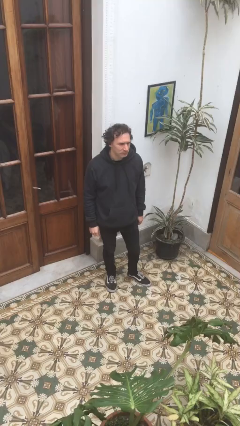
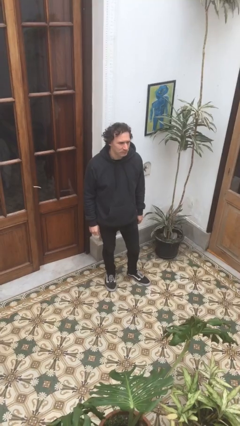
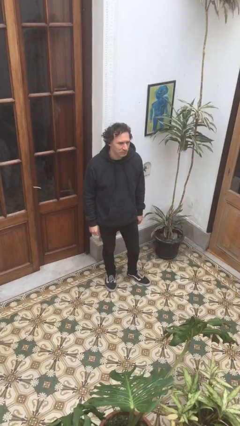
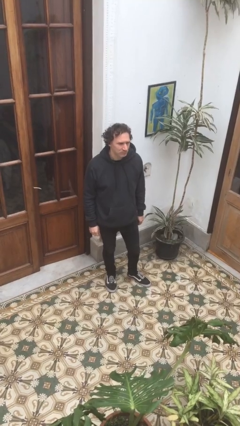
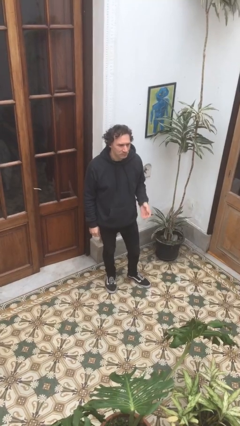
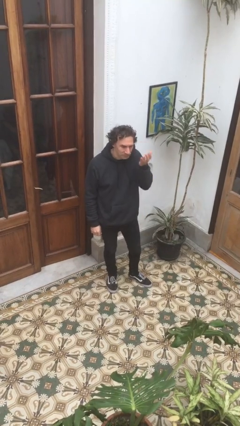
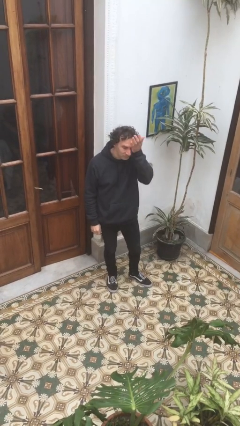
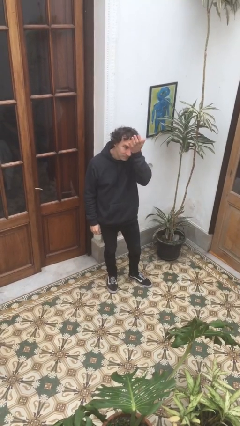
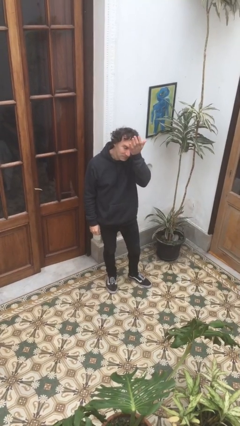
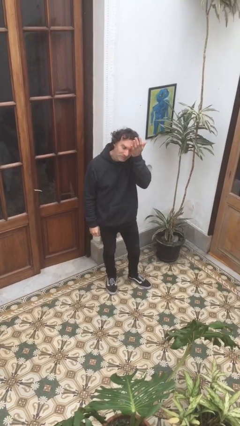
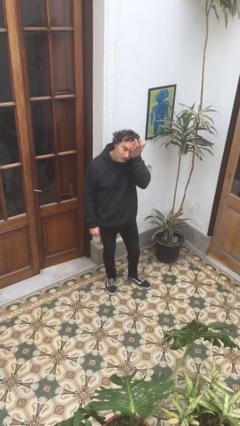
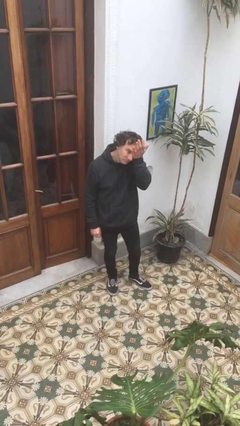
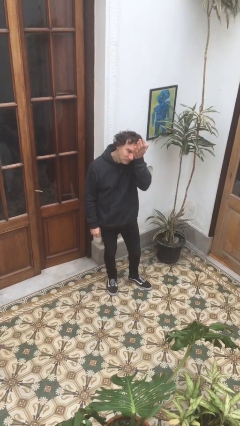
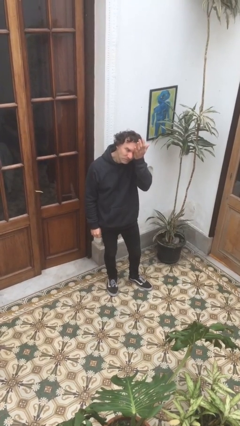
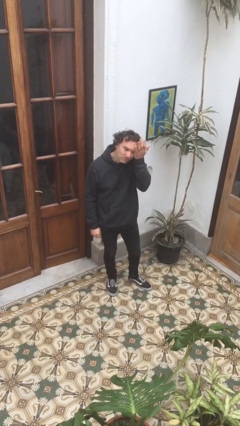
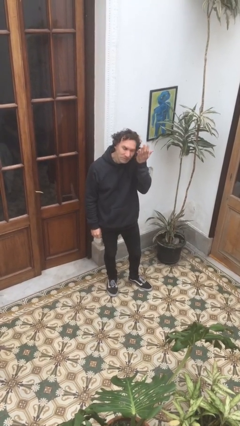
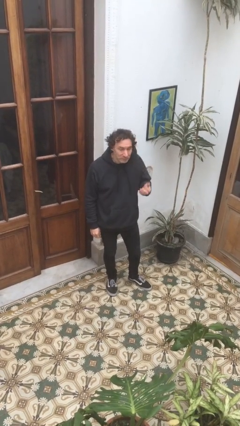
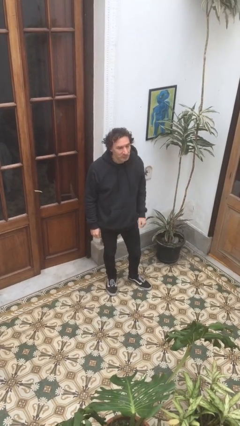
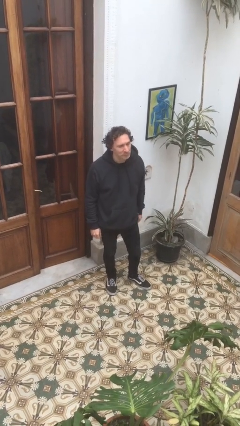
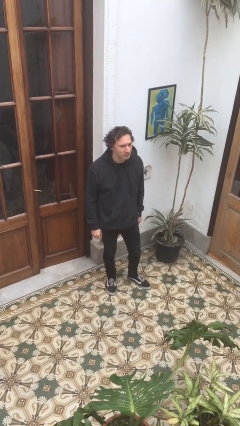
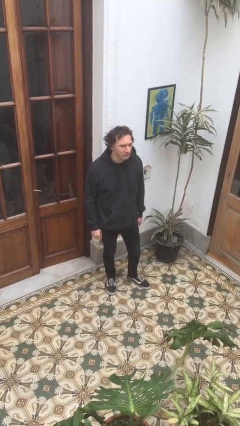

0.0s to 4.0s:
person rubs eyes

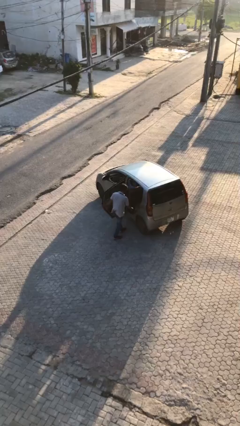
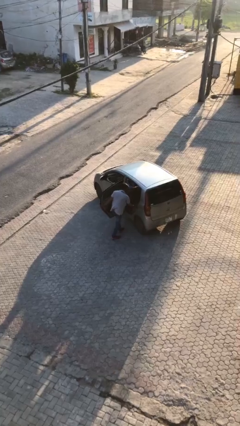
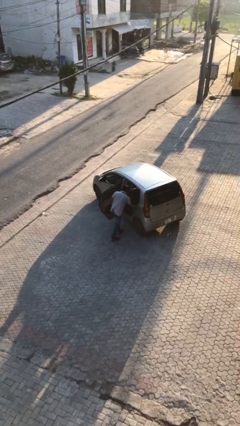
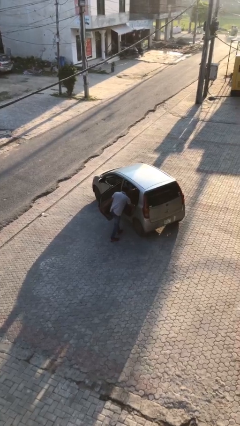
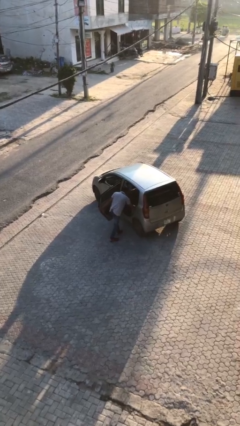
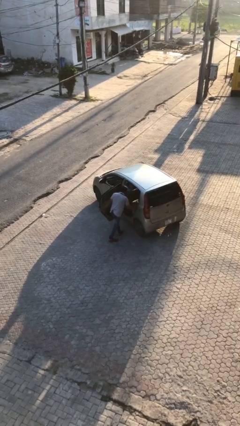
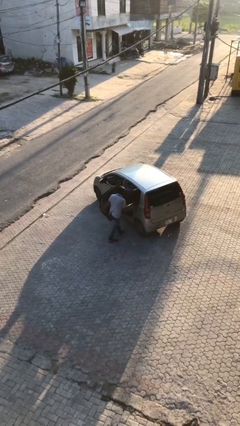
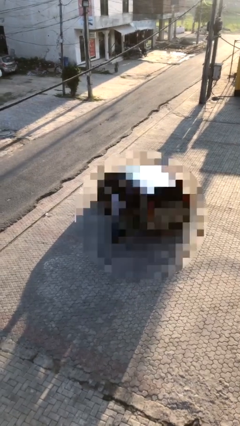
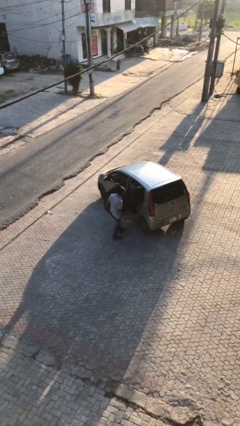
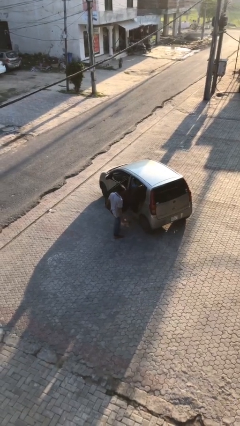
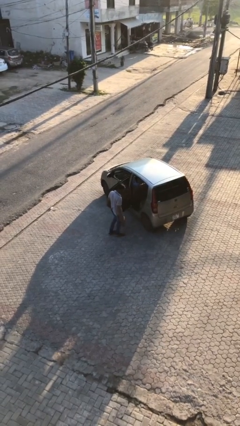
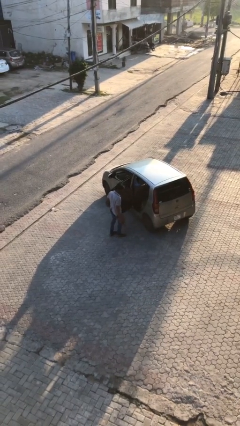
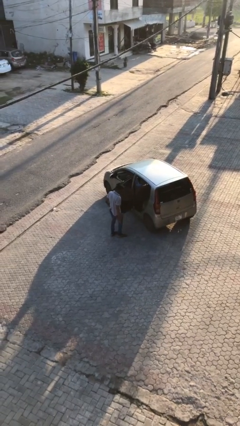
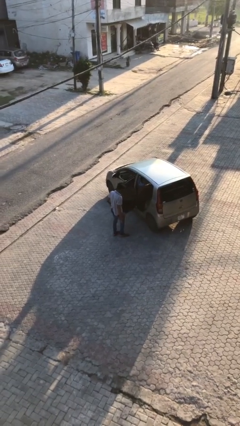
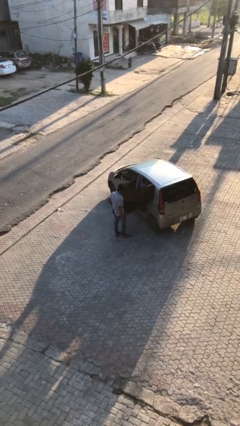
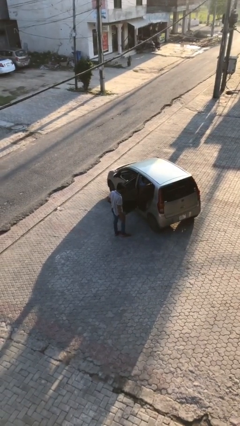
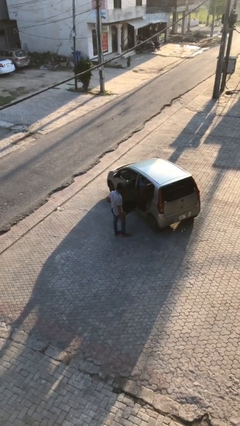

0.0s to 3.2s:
person unloads car

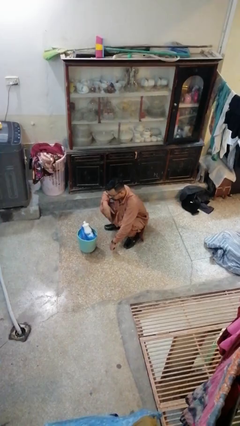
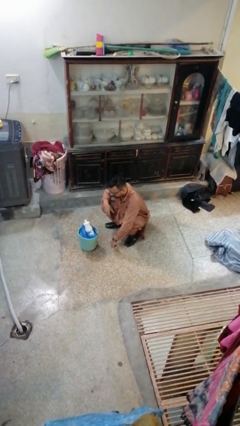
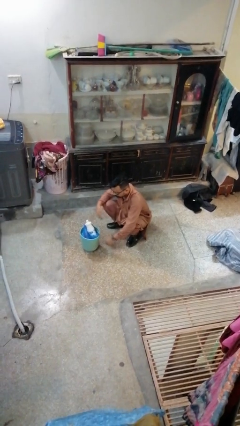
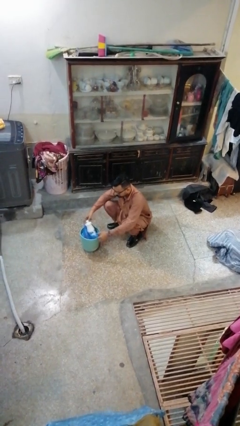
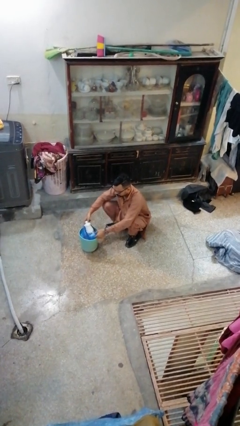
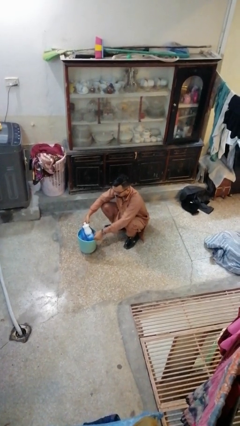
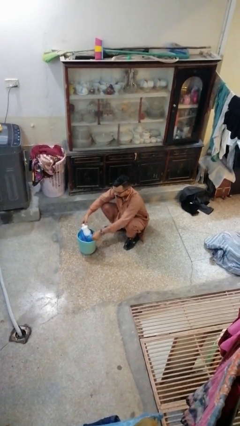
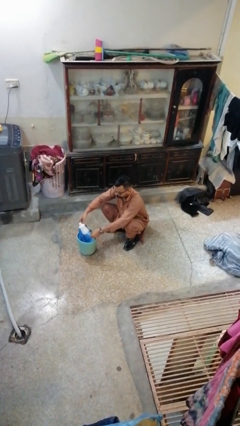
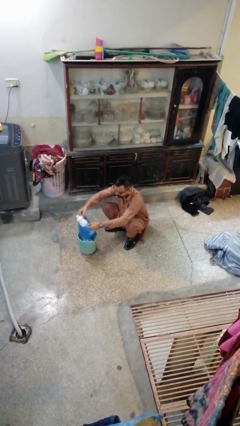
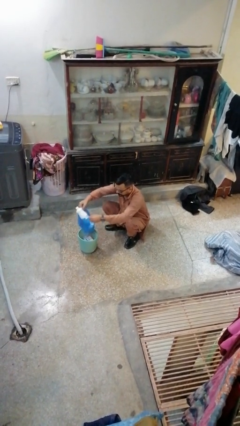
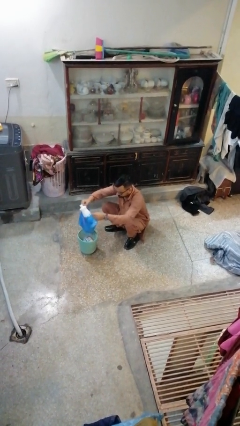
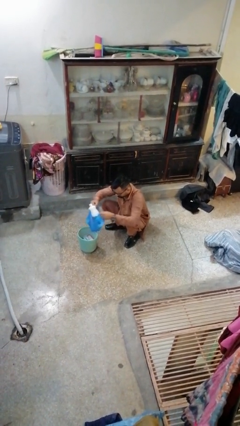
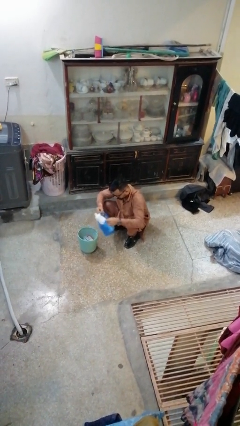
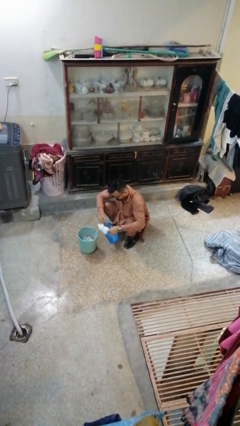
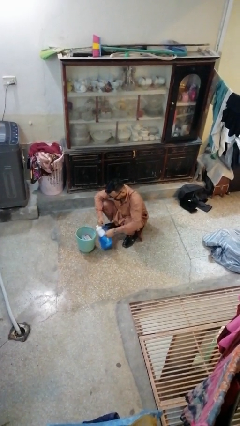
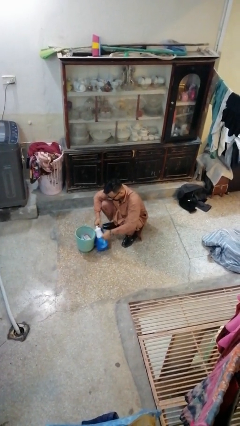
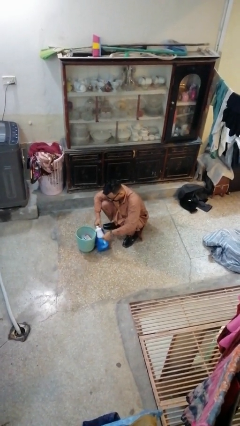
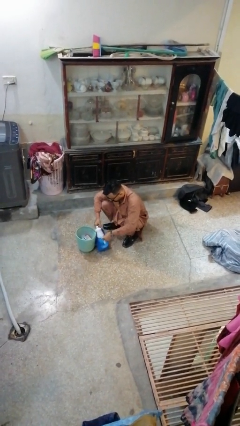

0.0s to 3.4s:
person removes trashbag from trashcan

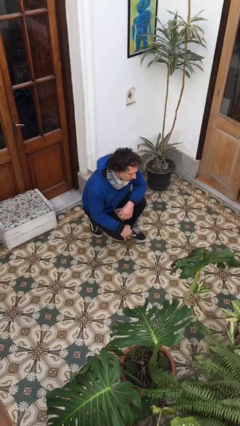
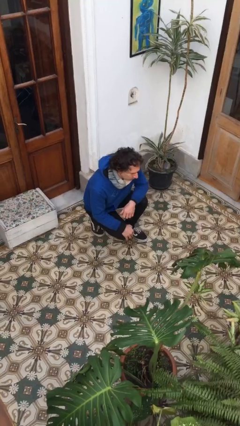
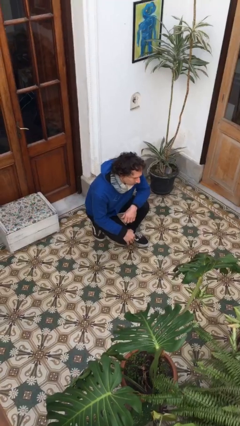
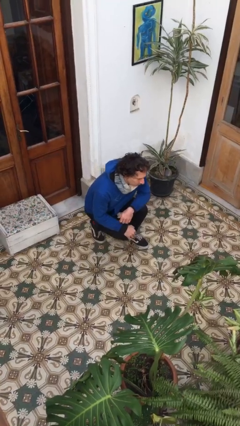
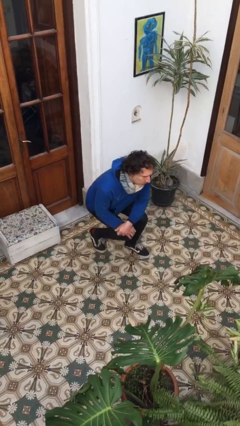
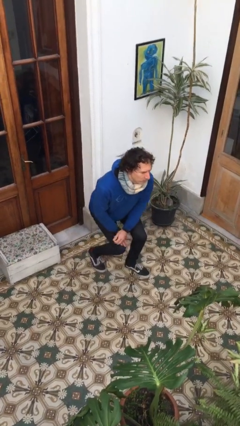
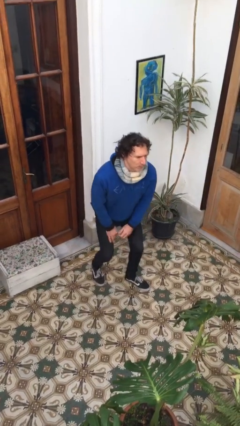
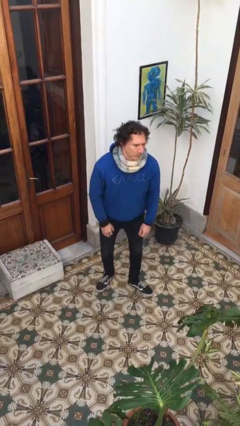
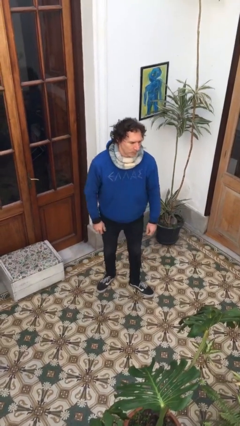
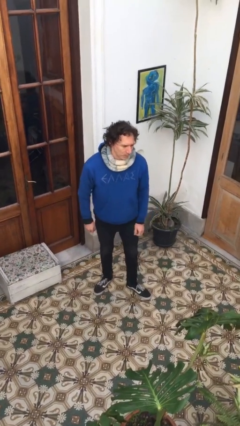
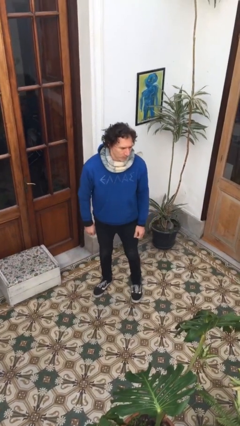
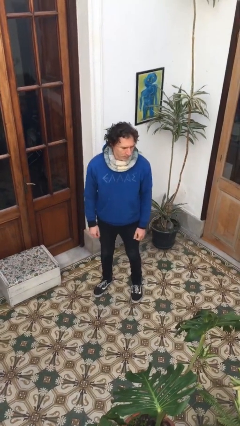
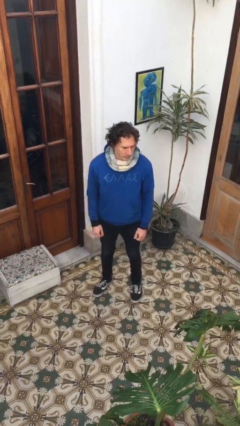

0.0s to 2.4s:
person stands up

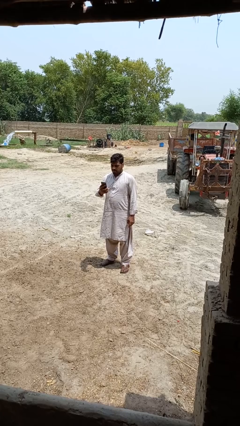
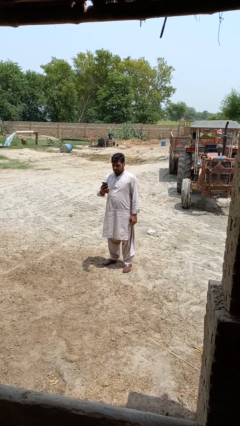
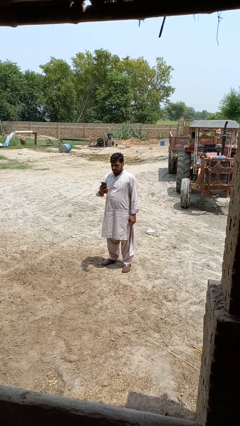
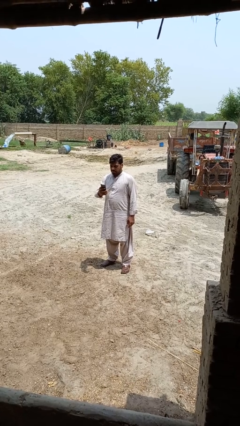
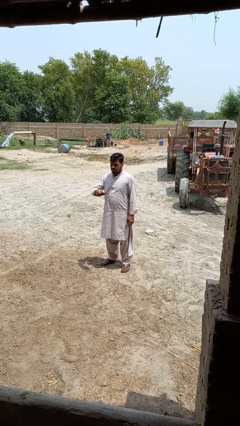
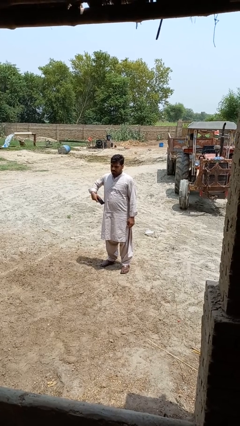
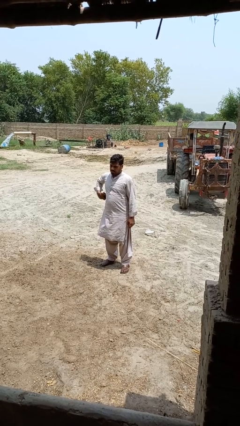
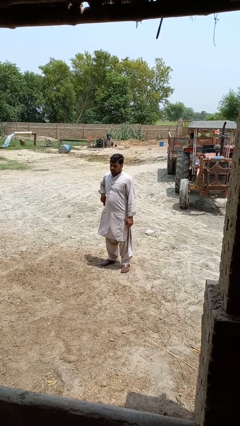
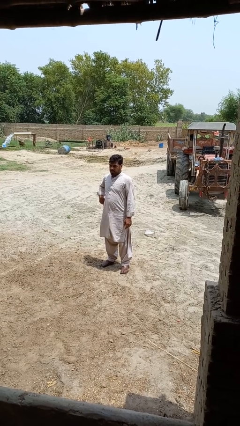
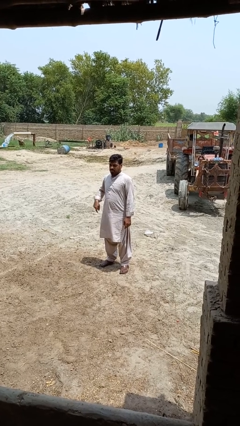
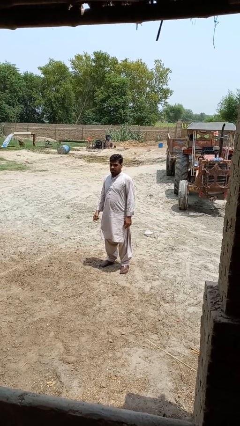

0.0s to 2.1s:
person puts phone into pocket

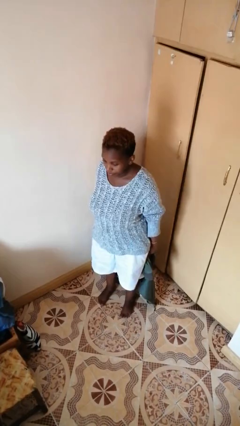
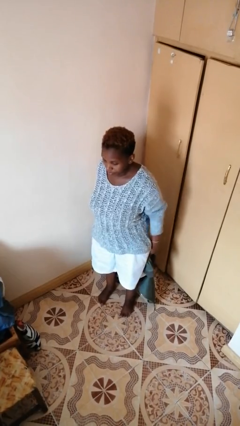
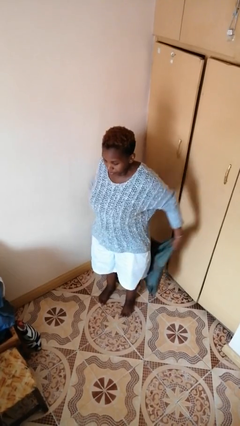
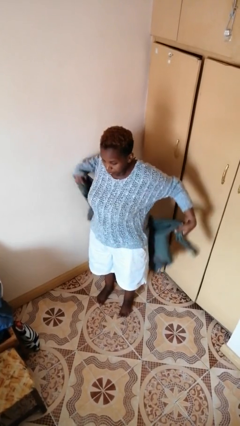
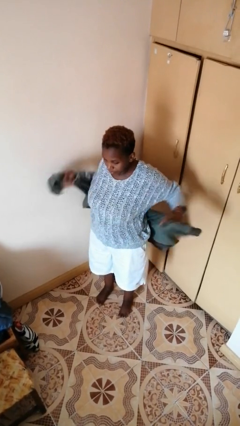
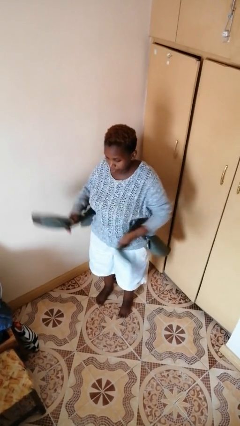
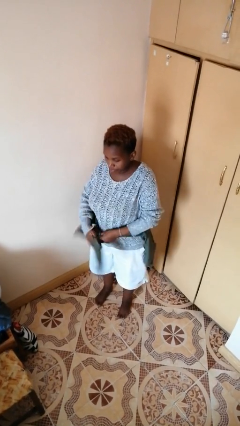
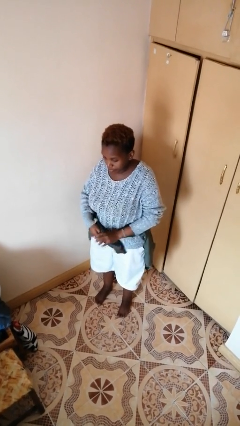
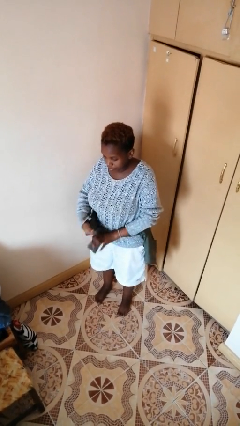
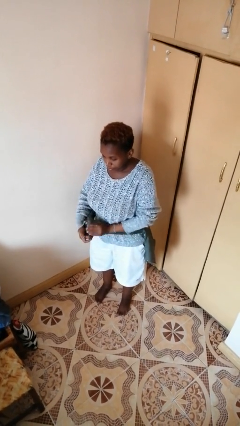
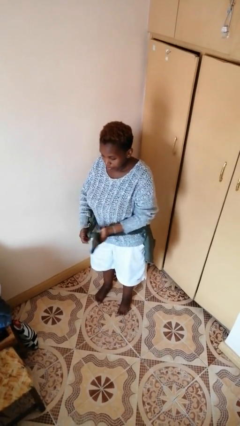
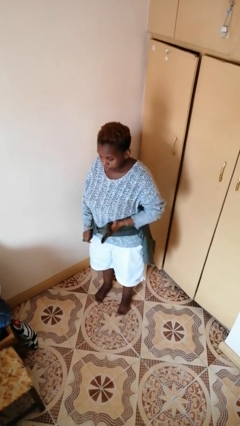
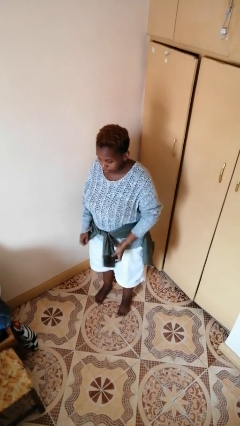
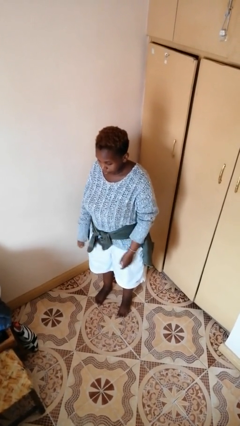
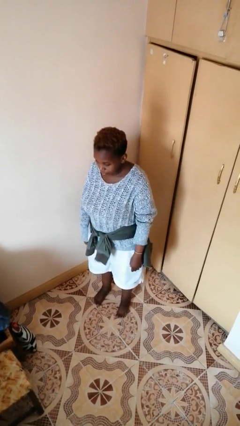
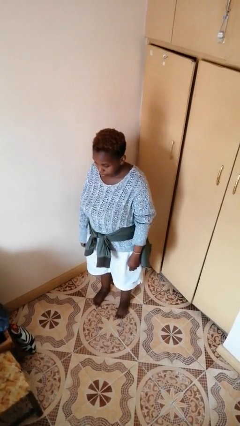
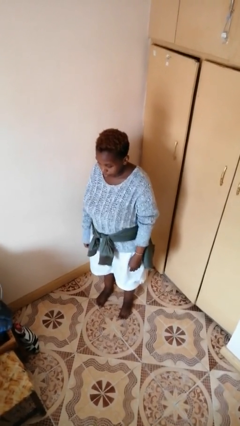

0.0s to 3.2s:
person ties jacket around waist
